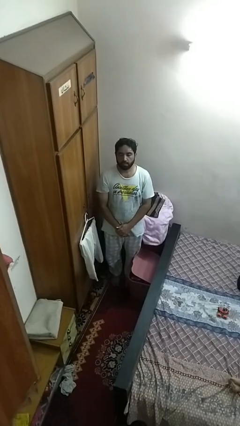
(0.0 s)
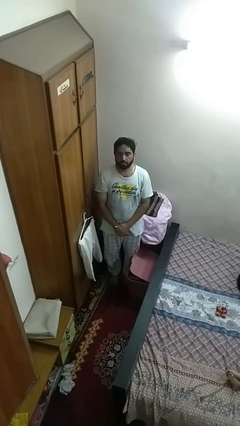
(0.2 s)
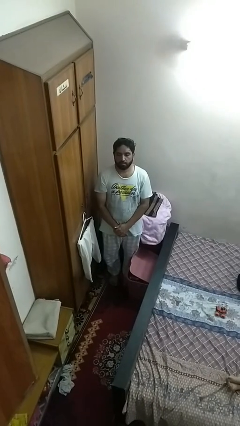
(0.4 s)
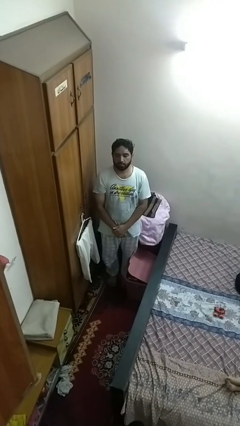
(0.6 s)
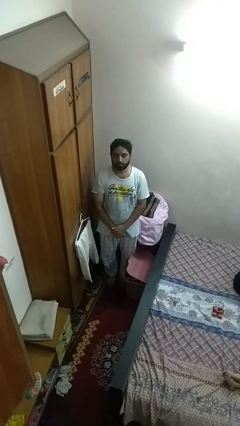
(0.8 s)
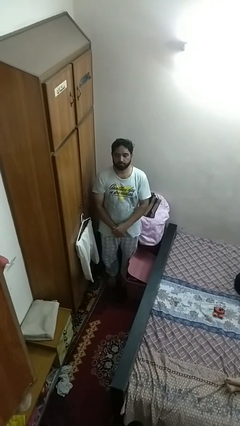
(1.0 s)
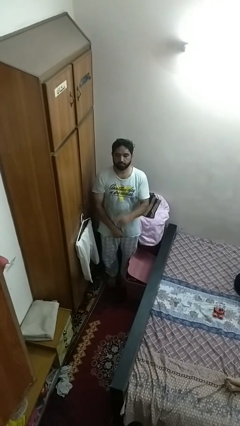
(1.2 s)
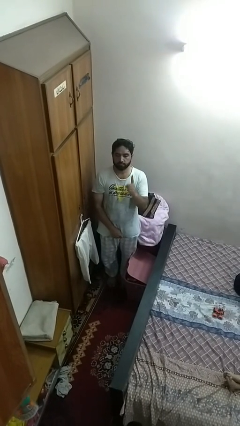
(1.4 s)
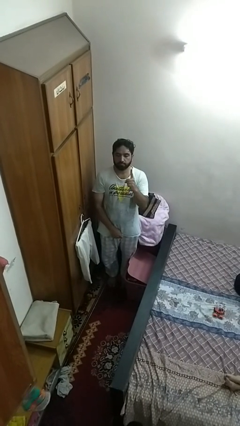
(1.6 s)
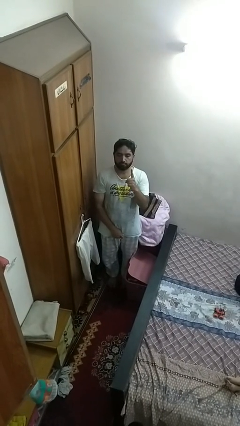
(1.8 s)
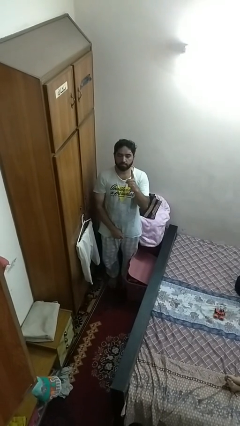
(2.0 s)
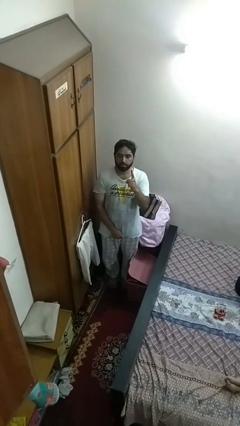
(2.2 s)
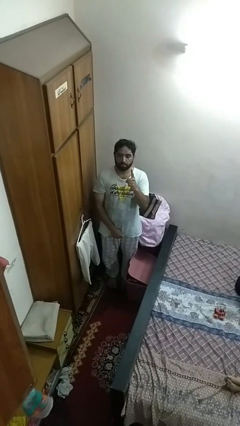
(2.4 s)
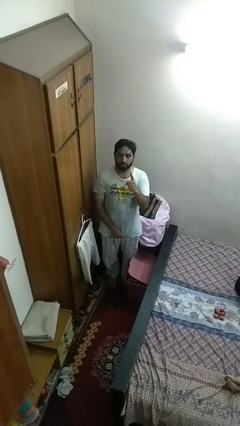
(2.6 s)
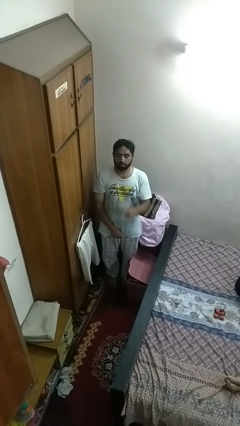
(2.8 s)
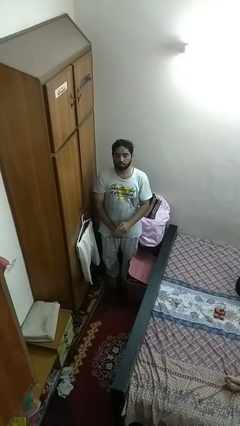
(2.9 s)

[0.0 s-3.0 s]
person gestures number one

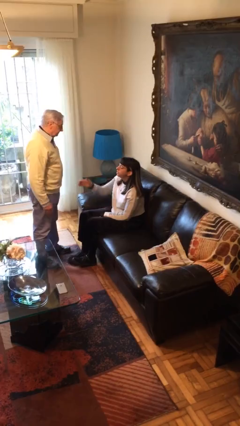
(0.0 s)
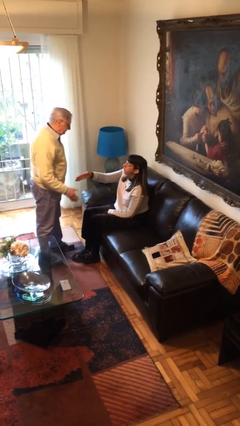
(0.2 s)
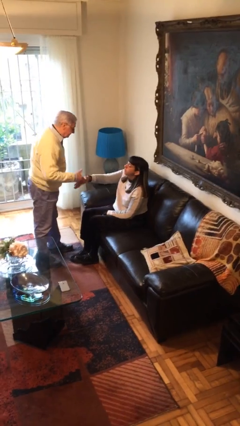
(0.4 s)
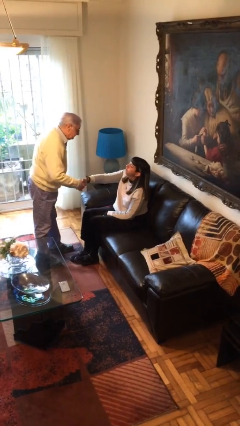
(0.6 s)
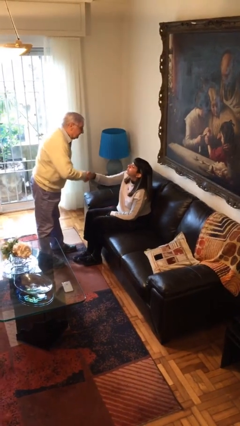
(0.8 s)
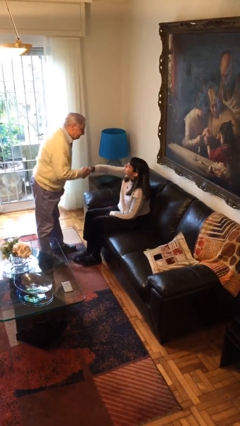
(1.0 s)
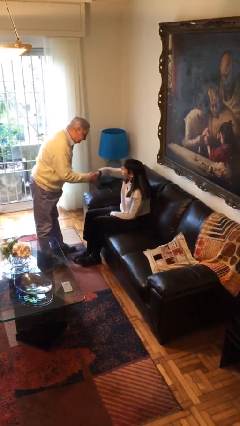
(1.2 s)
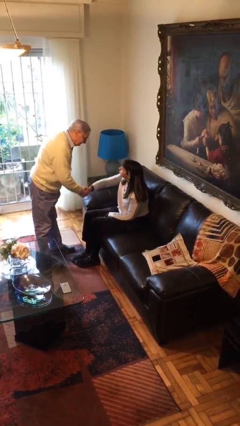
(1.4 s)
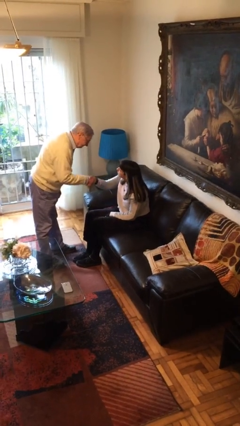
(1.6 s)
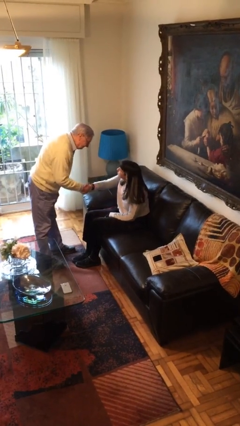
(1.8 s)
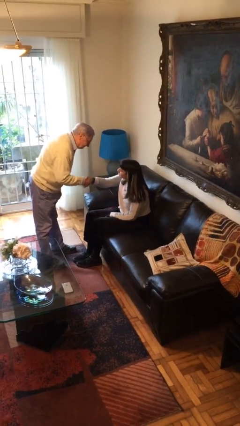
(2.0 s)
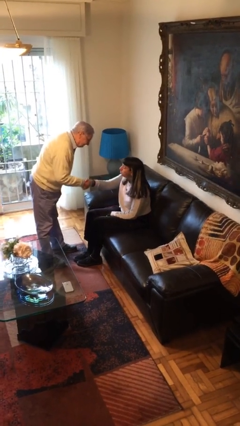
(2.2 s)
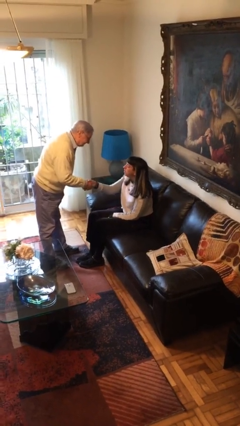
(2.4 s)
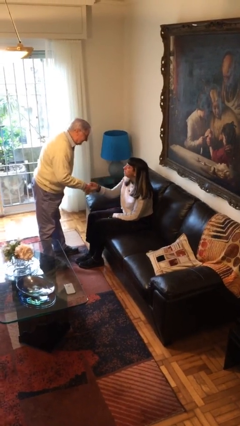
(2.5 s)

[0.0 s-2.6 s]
person shakes hand

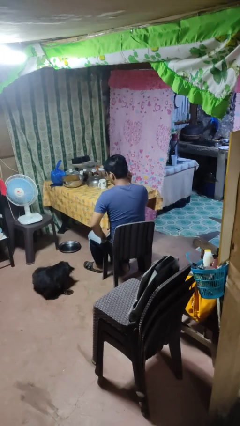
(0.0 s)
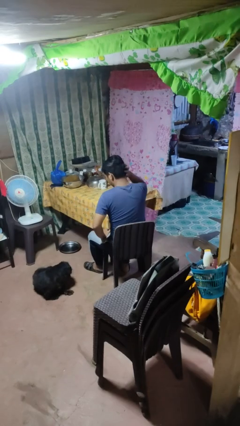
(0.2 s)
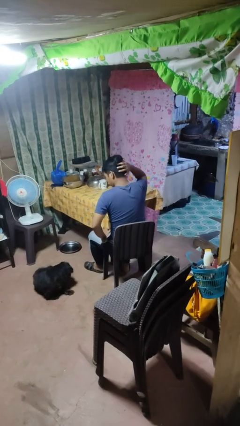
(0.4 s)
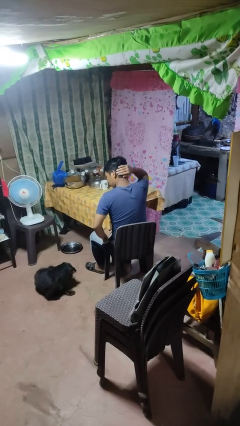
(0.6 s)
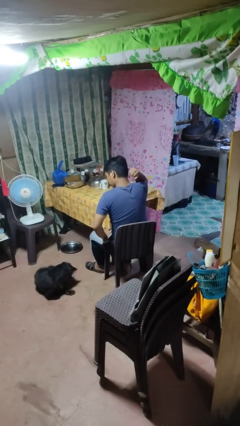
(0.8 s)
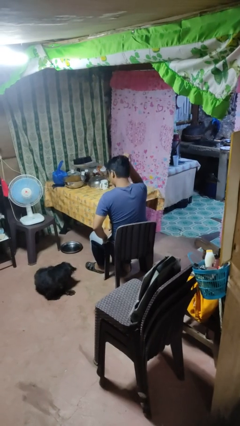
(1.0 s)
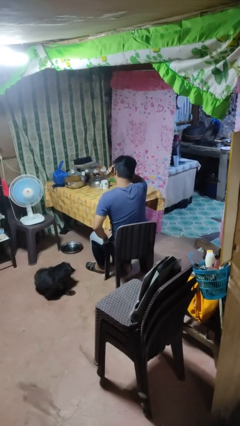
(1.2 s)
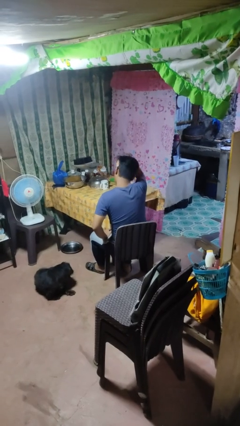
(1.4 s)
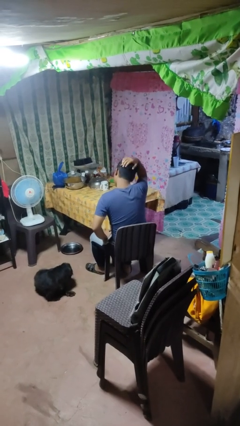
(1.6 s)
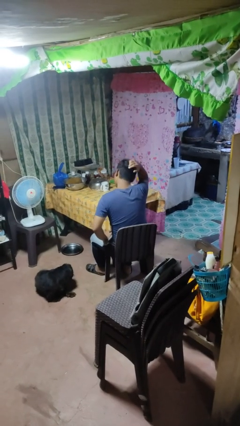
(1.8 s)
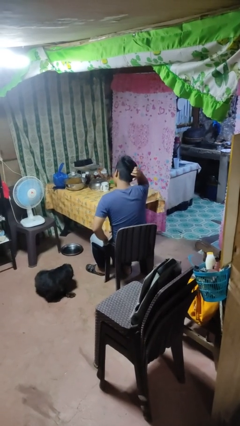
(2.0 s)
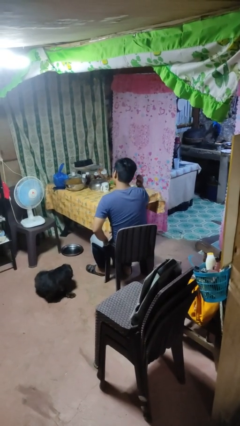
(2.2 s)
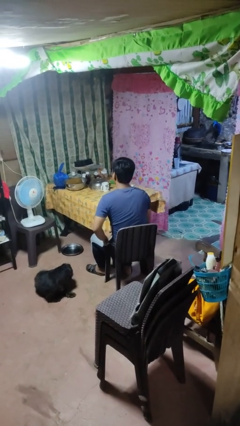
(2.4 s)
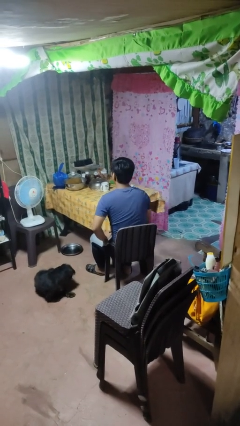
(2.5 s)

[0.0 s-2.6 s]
person strokes hair

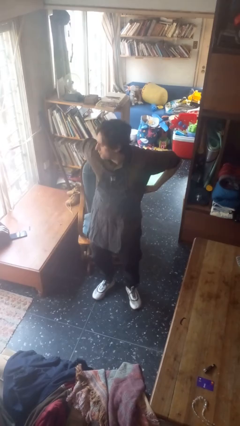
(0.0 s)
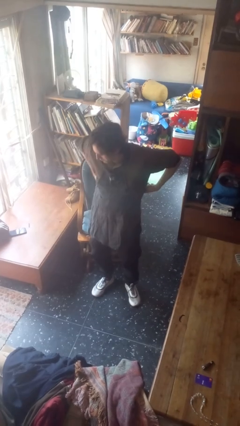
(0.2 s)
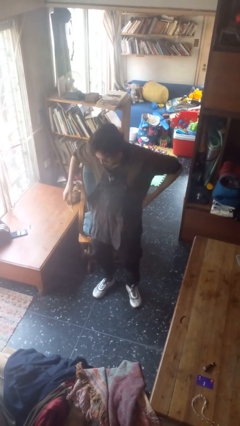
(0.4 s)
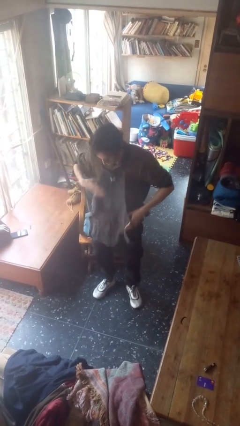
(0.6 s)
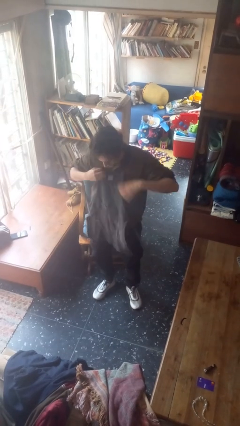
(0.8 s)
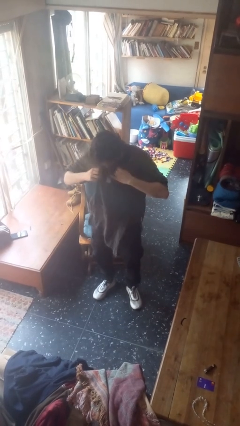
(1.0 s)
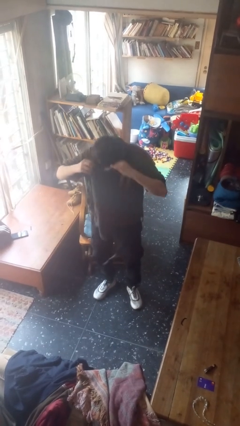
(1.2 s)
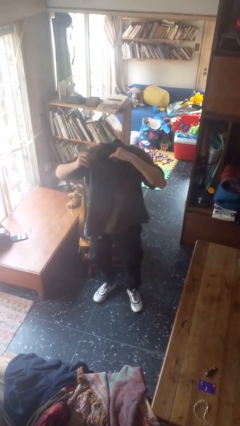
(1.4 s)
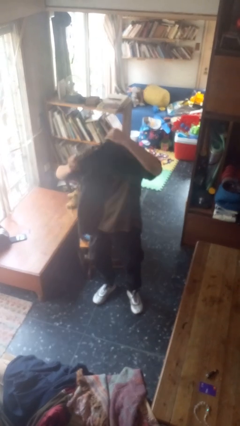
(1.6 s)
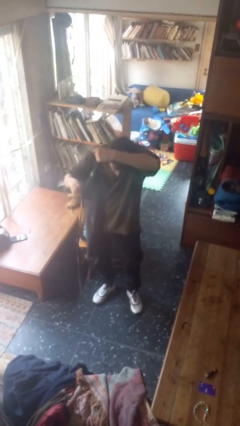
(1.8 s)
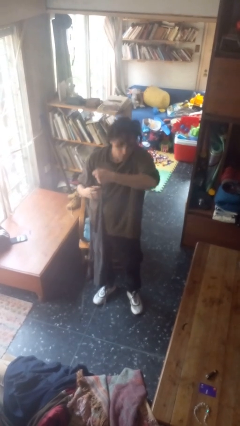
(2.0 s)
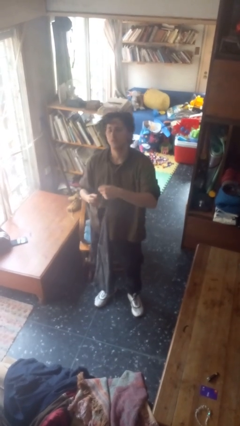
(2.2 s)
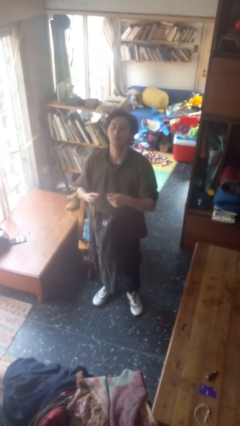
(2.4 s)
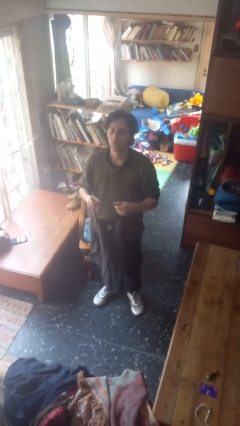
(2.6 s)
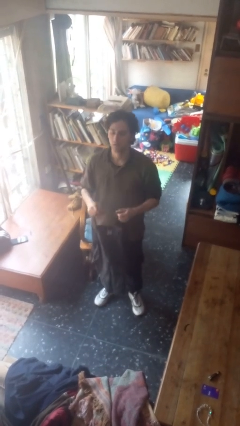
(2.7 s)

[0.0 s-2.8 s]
person takes off apron

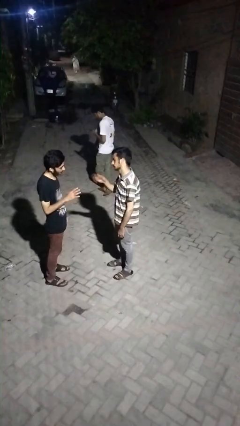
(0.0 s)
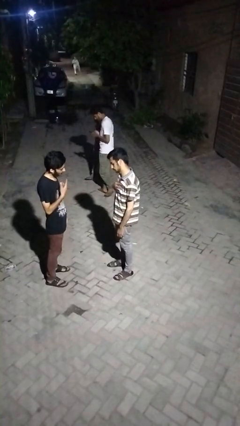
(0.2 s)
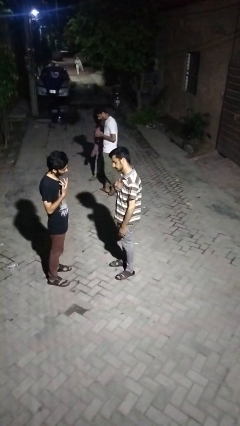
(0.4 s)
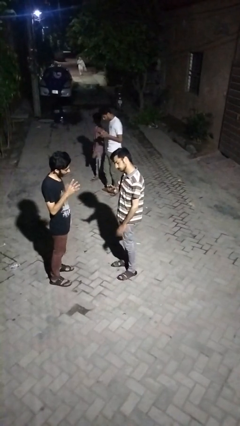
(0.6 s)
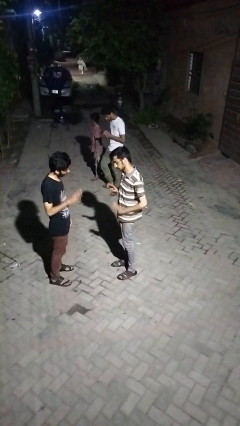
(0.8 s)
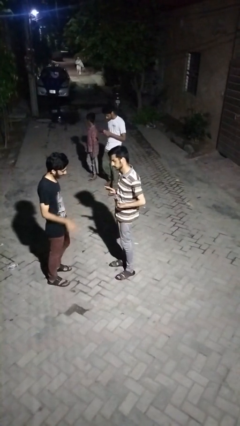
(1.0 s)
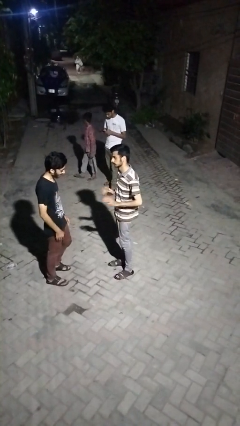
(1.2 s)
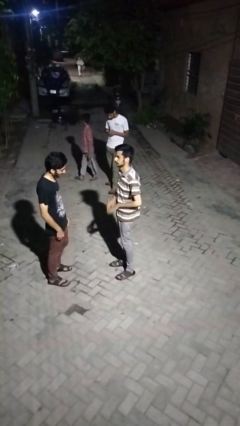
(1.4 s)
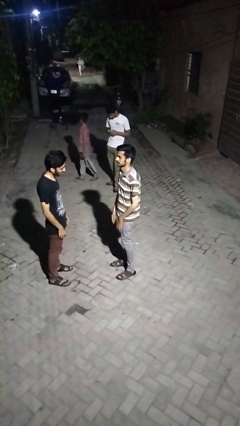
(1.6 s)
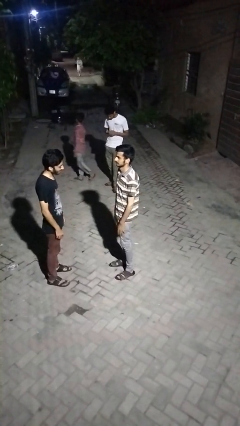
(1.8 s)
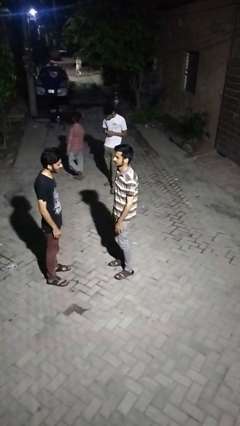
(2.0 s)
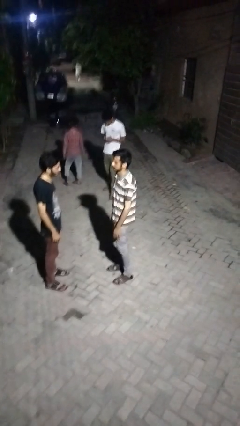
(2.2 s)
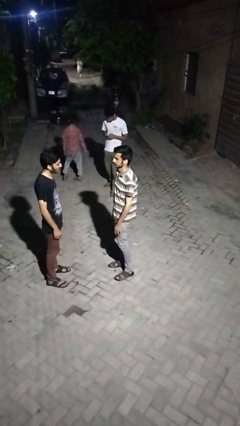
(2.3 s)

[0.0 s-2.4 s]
person talks to person

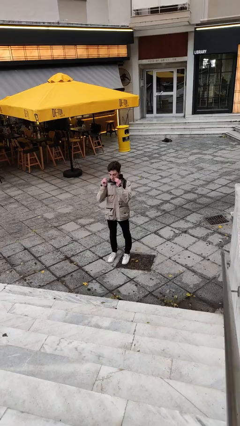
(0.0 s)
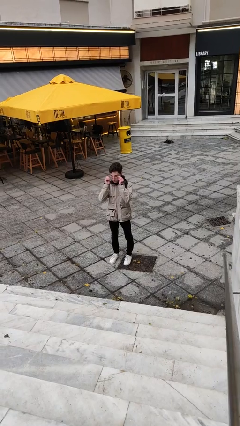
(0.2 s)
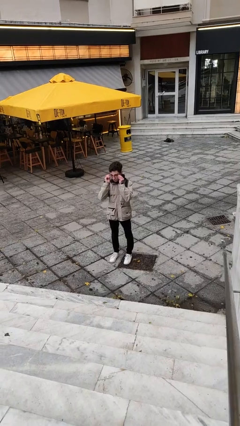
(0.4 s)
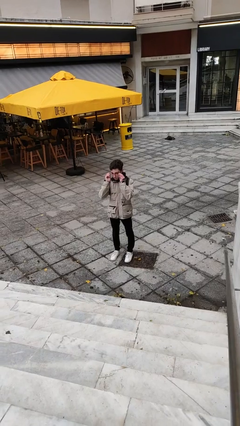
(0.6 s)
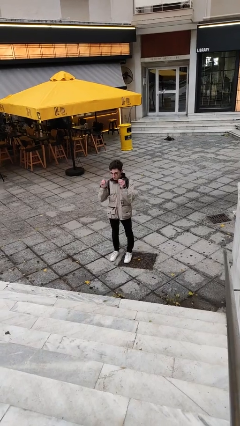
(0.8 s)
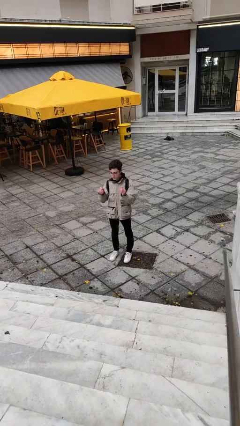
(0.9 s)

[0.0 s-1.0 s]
person puts on glasses

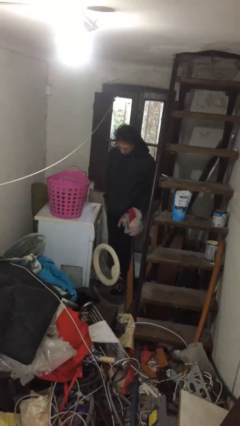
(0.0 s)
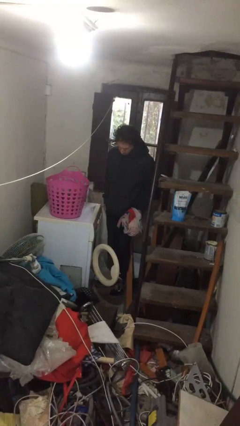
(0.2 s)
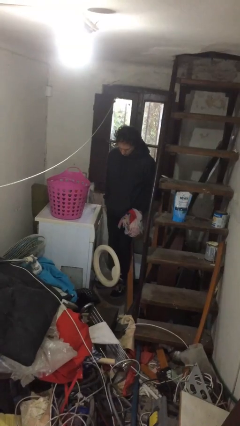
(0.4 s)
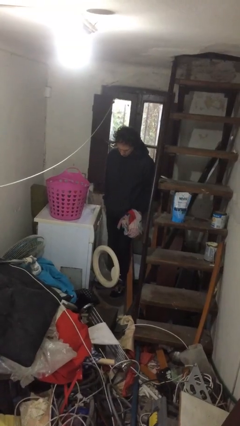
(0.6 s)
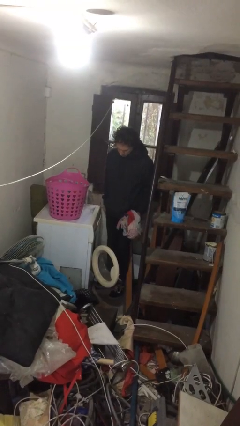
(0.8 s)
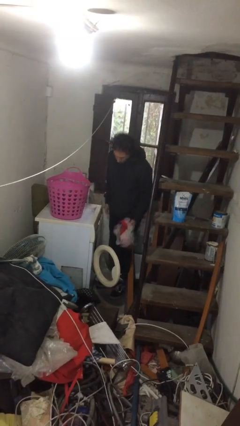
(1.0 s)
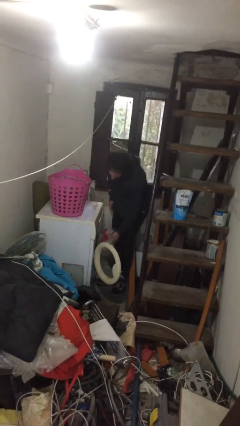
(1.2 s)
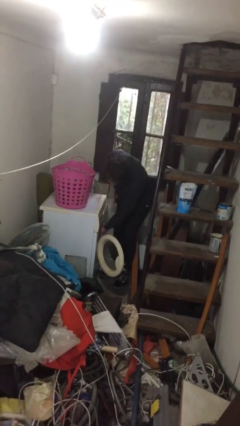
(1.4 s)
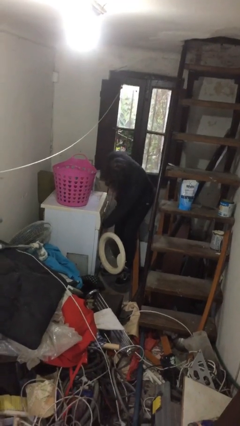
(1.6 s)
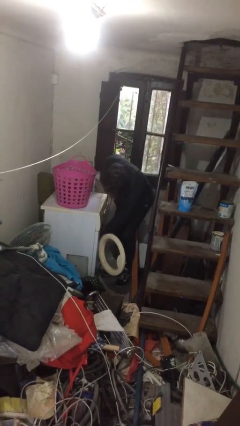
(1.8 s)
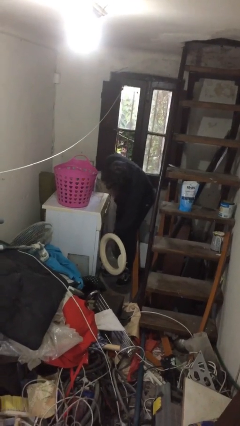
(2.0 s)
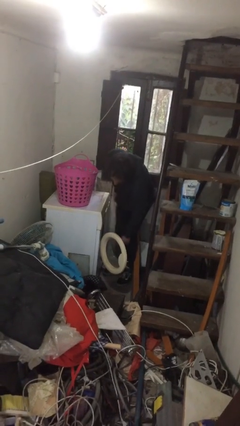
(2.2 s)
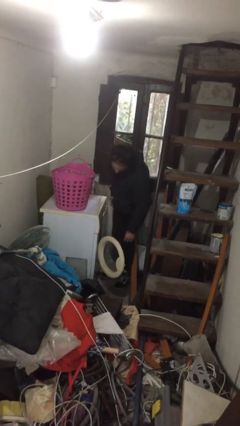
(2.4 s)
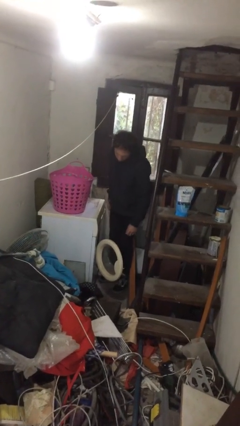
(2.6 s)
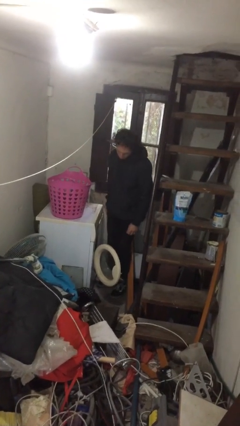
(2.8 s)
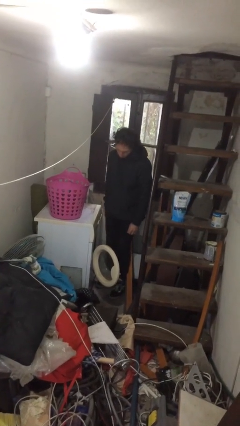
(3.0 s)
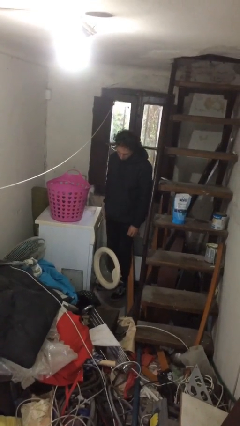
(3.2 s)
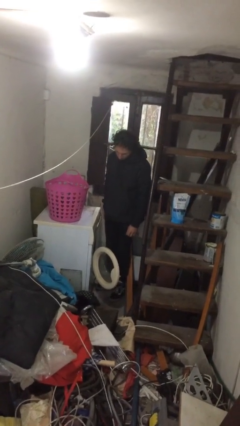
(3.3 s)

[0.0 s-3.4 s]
person loads clotheswasher
